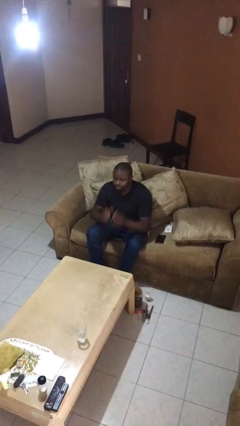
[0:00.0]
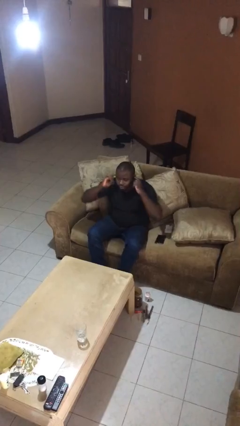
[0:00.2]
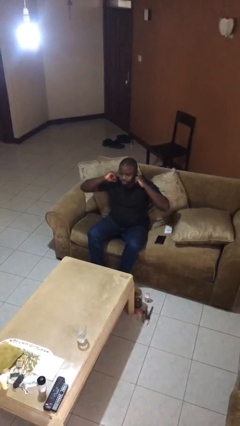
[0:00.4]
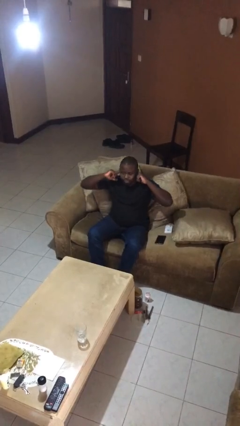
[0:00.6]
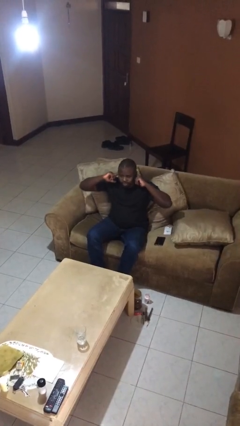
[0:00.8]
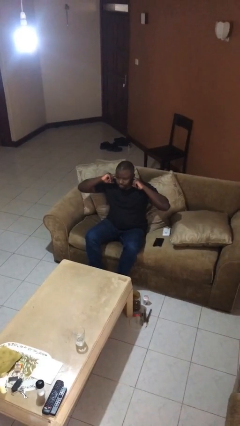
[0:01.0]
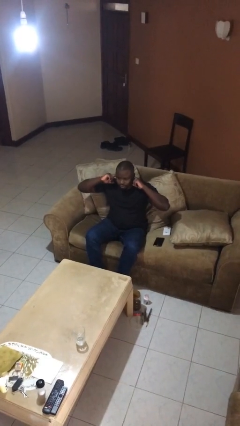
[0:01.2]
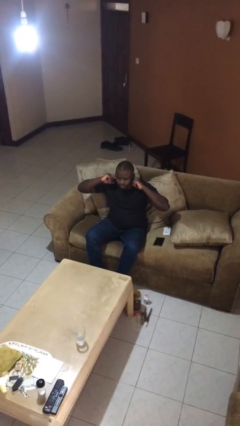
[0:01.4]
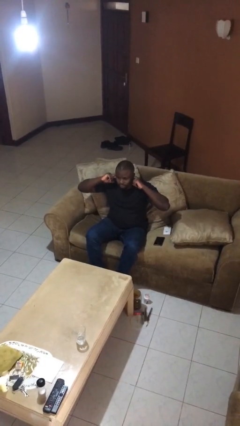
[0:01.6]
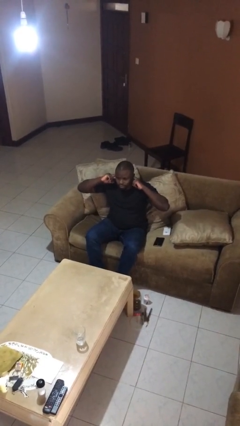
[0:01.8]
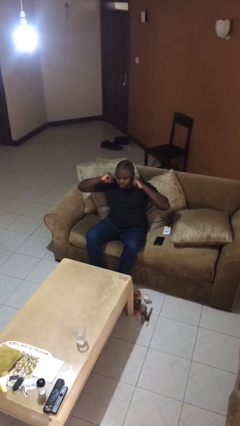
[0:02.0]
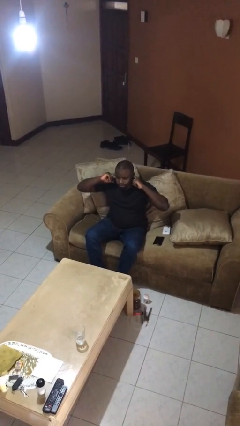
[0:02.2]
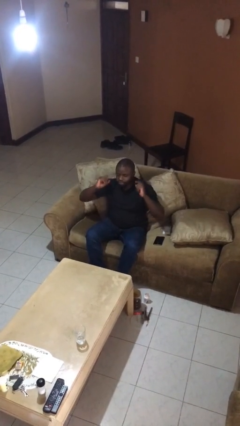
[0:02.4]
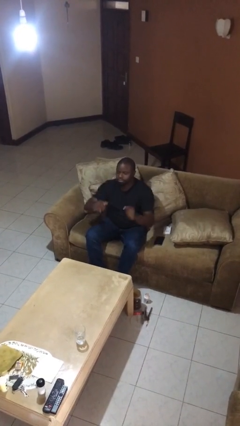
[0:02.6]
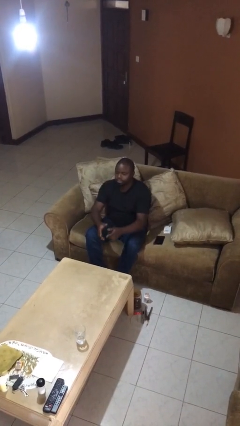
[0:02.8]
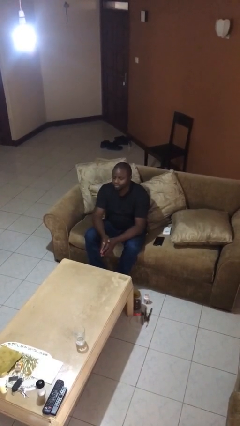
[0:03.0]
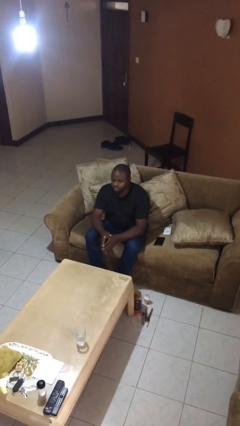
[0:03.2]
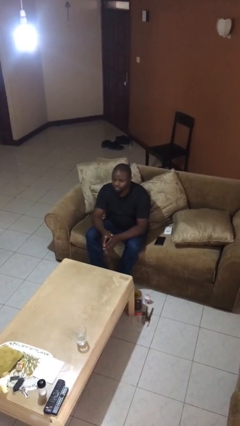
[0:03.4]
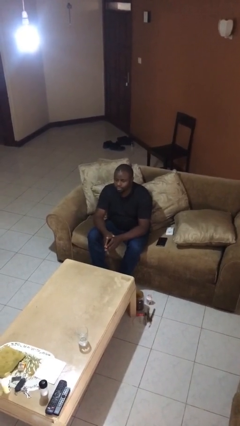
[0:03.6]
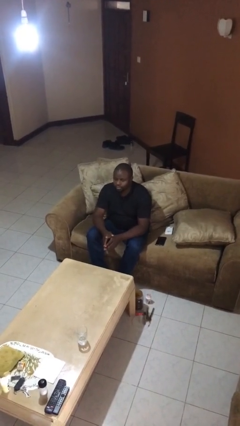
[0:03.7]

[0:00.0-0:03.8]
person puts fingers in ear

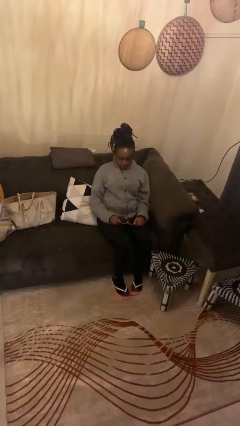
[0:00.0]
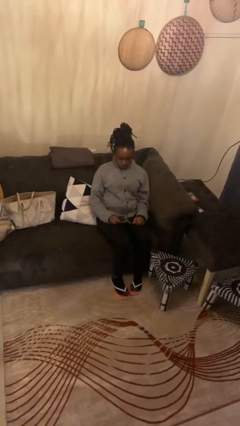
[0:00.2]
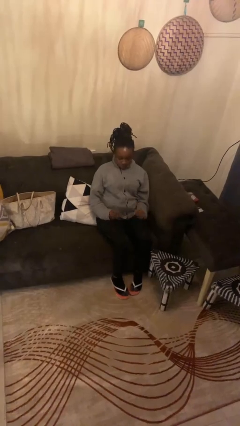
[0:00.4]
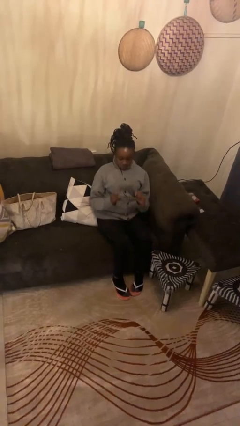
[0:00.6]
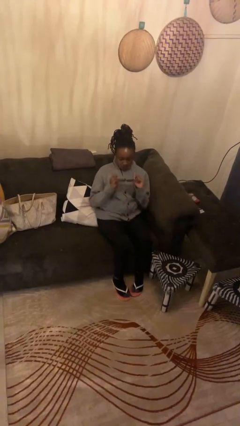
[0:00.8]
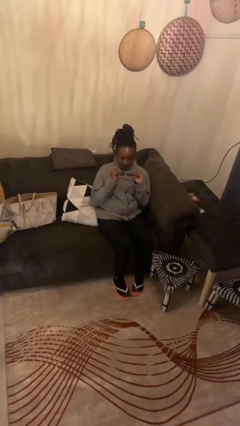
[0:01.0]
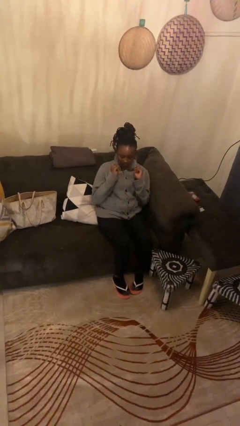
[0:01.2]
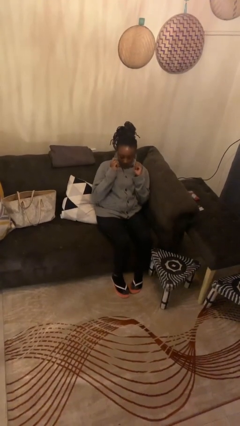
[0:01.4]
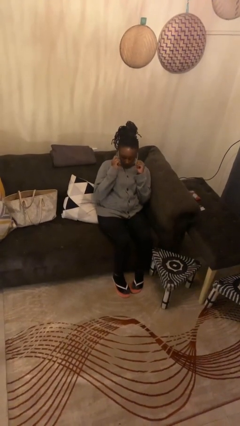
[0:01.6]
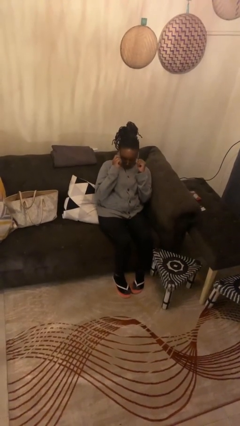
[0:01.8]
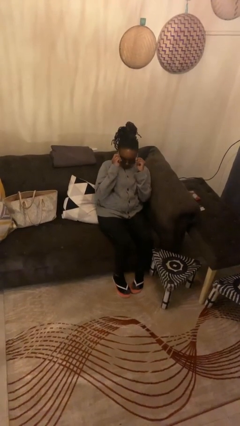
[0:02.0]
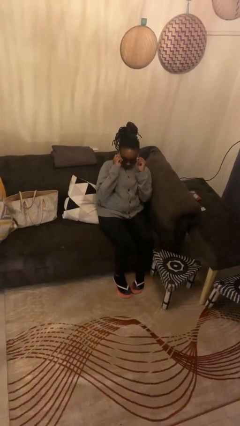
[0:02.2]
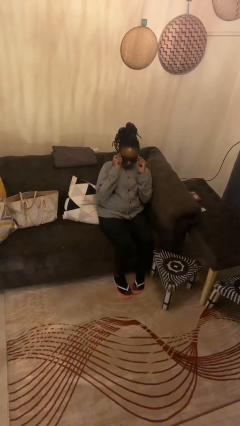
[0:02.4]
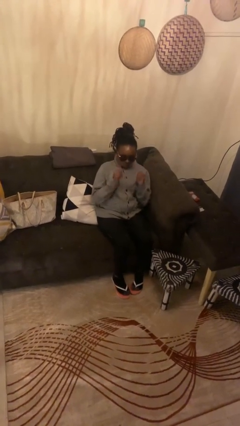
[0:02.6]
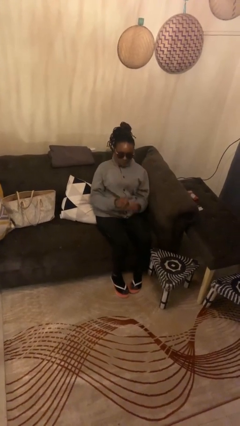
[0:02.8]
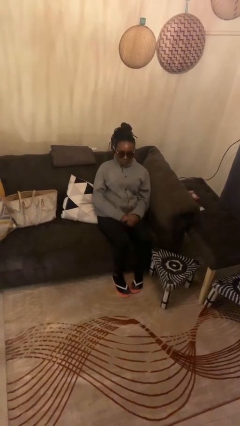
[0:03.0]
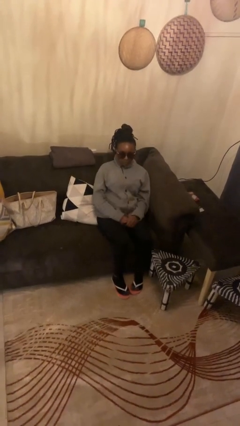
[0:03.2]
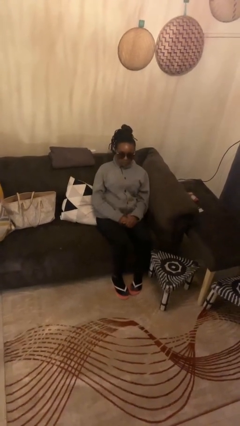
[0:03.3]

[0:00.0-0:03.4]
person puts on sunglasses

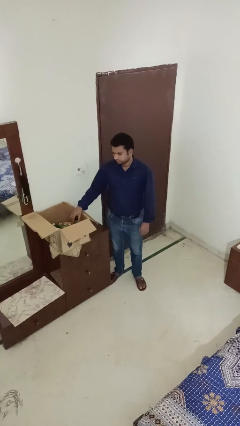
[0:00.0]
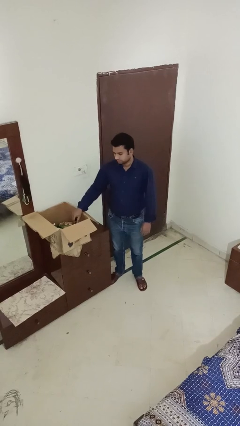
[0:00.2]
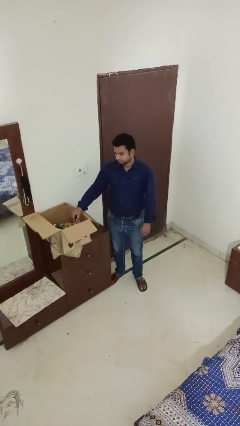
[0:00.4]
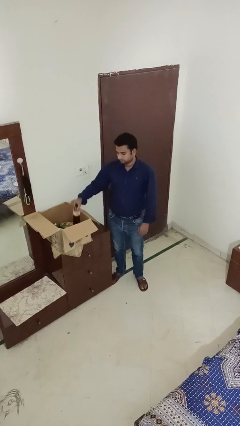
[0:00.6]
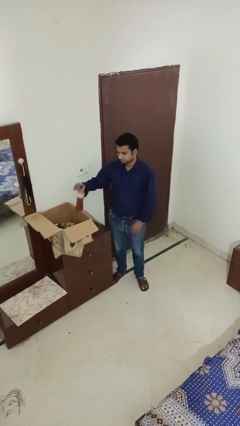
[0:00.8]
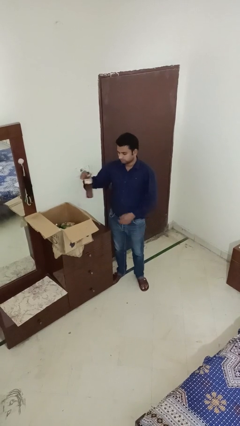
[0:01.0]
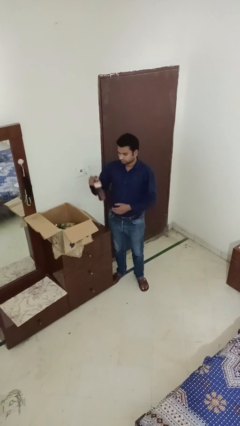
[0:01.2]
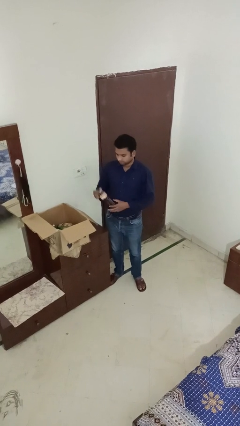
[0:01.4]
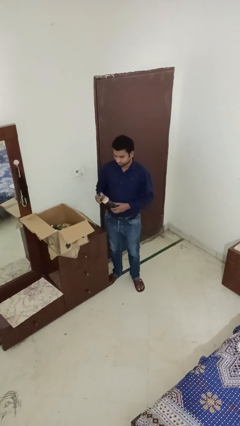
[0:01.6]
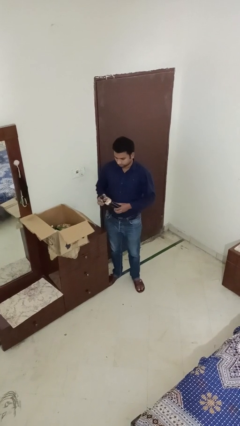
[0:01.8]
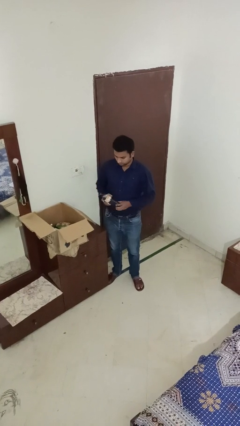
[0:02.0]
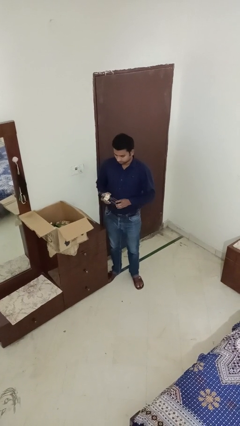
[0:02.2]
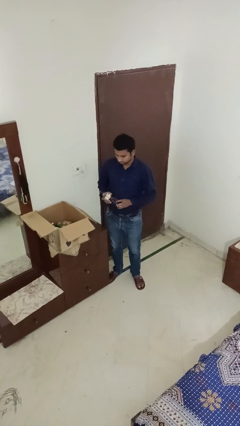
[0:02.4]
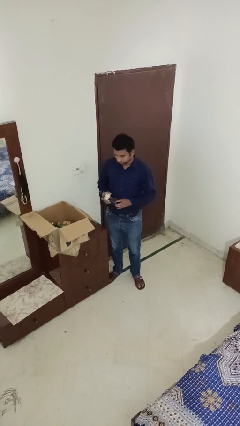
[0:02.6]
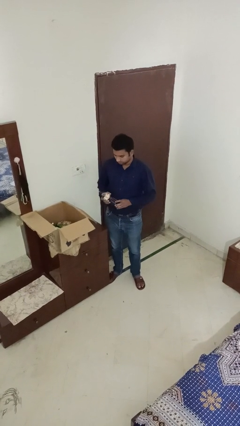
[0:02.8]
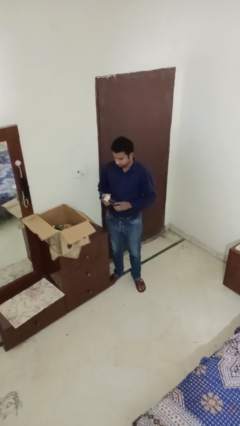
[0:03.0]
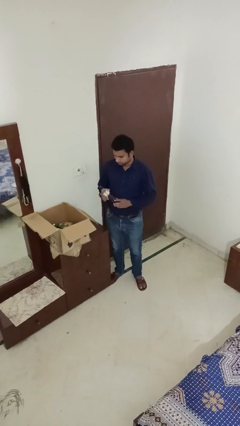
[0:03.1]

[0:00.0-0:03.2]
person takes object from box

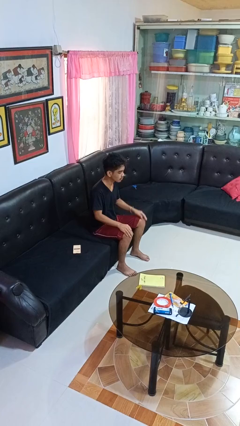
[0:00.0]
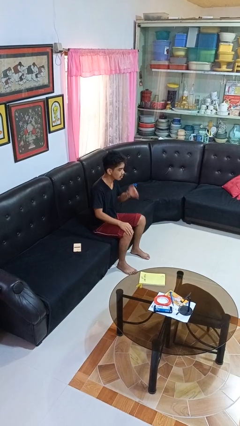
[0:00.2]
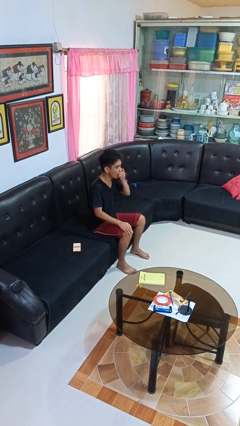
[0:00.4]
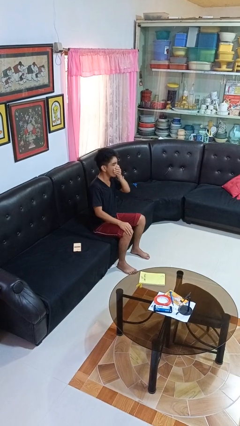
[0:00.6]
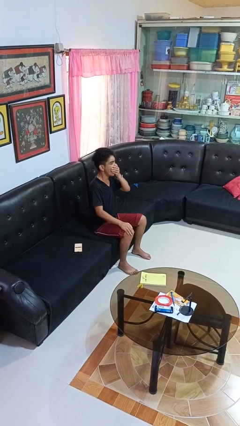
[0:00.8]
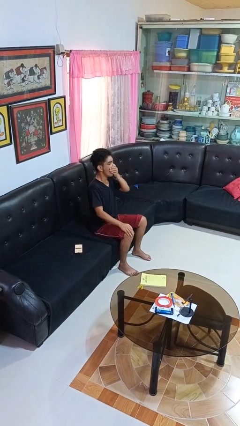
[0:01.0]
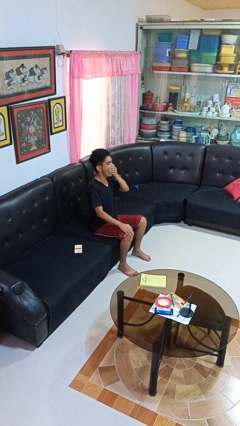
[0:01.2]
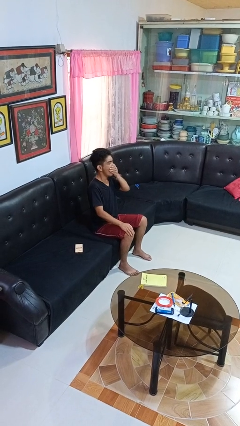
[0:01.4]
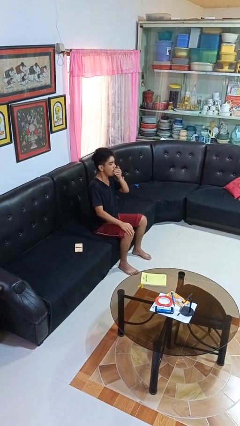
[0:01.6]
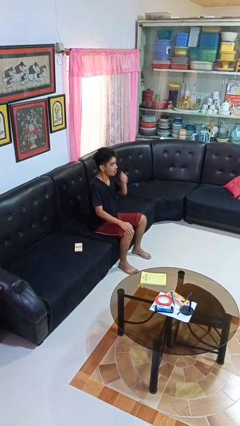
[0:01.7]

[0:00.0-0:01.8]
person yawns

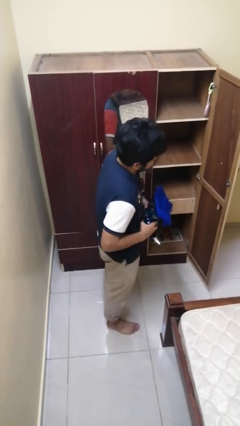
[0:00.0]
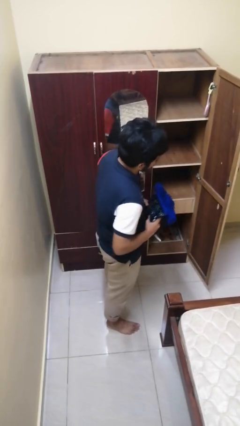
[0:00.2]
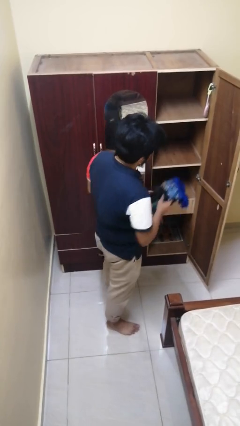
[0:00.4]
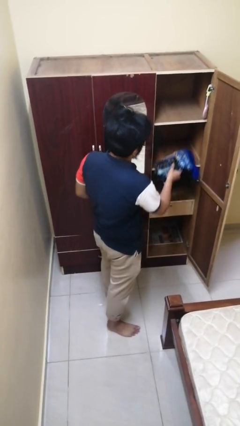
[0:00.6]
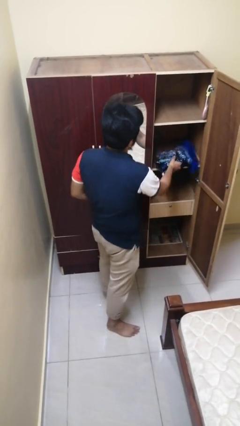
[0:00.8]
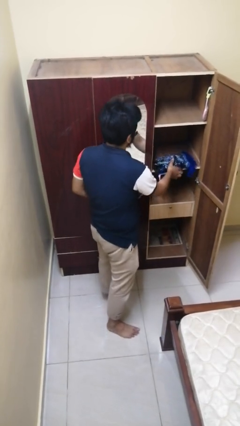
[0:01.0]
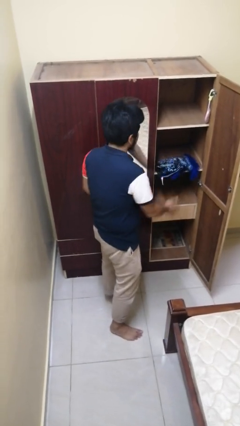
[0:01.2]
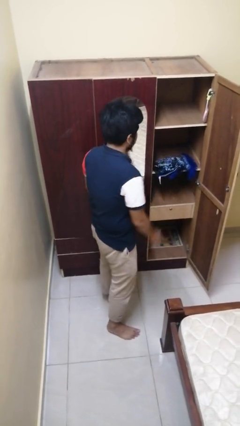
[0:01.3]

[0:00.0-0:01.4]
person puts down object into cabinet

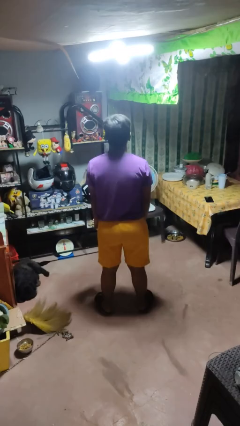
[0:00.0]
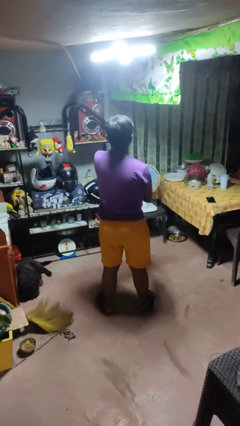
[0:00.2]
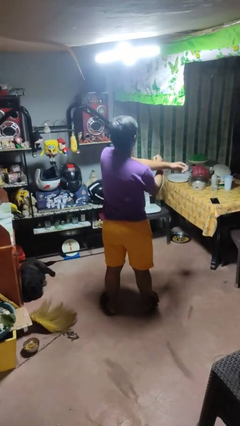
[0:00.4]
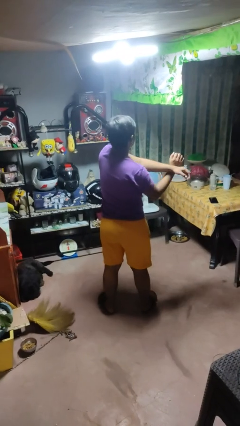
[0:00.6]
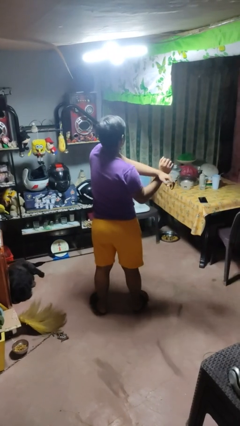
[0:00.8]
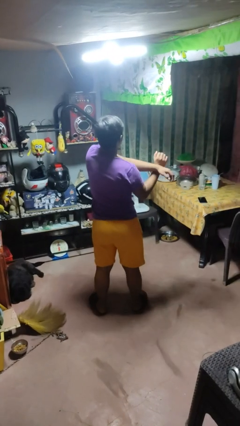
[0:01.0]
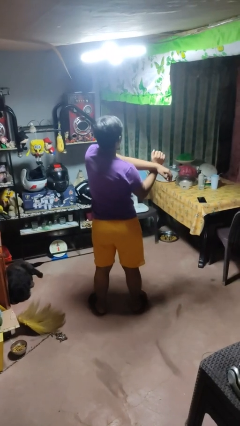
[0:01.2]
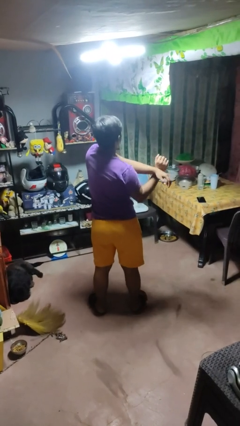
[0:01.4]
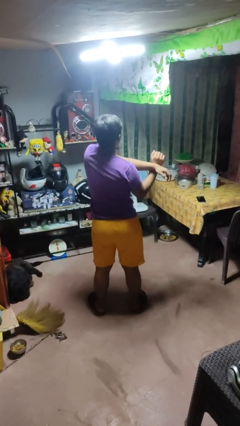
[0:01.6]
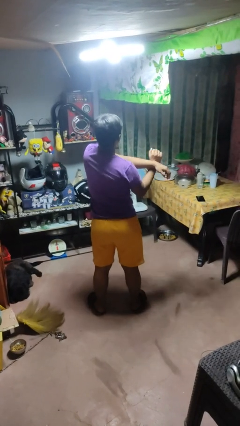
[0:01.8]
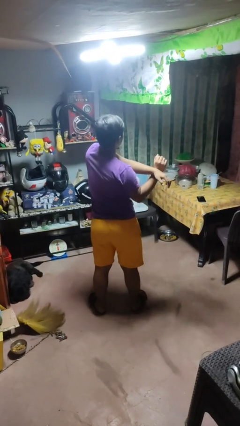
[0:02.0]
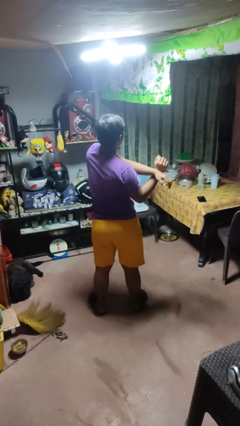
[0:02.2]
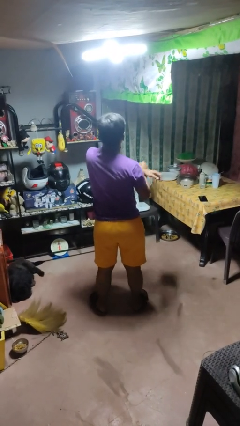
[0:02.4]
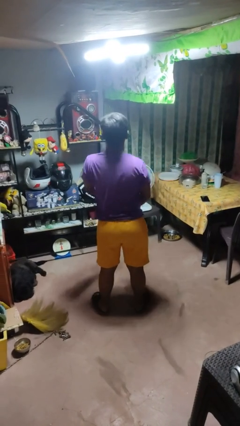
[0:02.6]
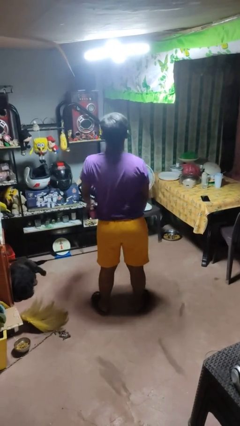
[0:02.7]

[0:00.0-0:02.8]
person crosses arms

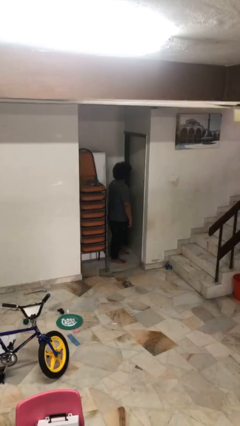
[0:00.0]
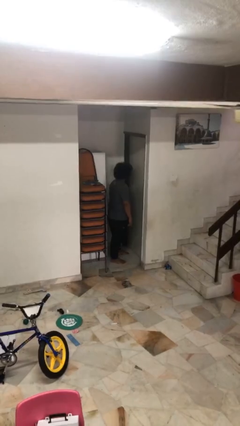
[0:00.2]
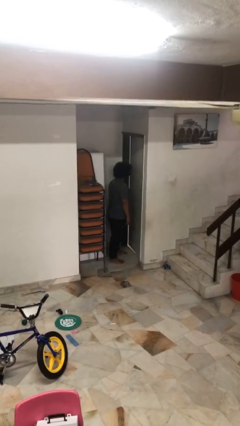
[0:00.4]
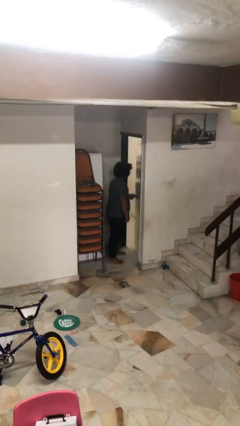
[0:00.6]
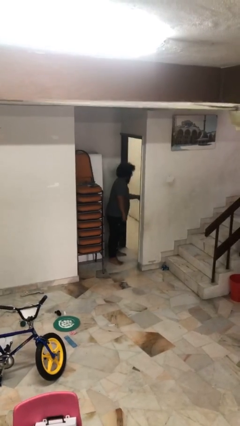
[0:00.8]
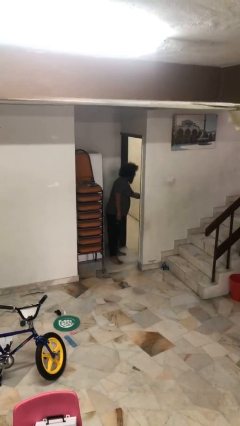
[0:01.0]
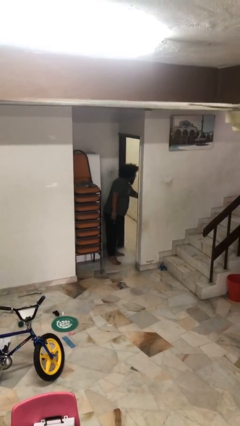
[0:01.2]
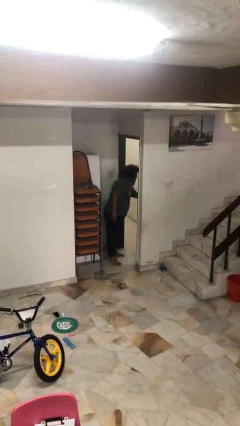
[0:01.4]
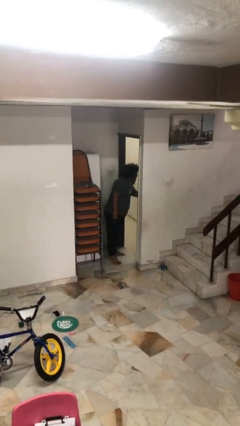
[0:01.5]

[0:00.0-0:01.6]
person opens facility door
